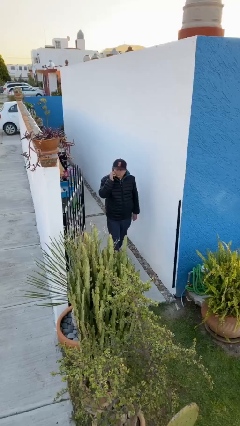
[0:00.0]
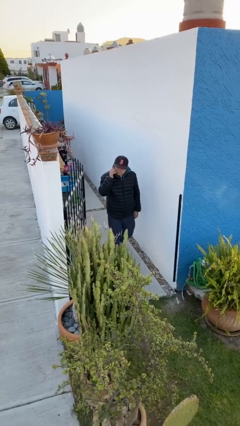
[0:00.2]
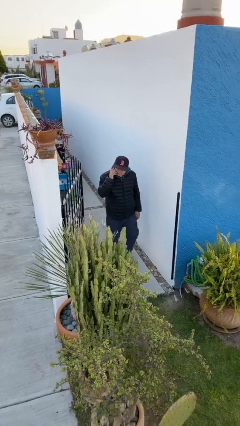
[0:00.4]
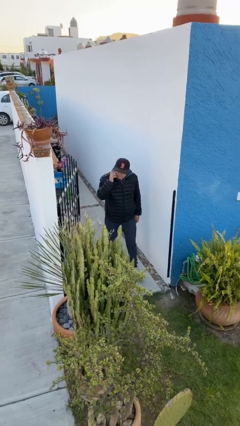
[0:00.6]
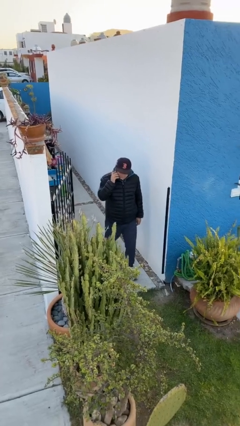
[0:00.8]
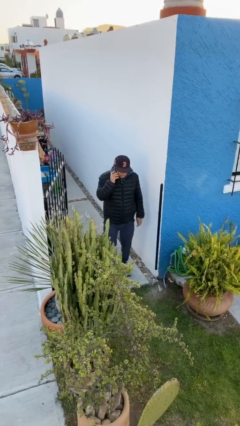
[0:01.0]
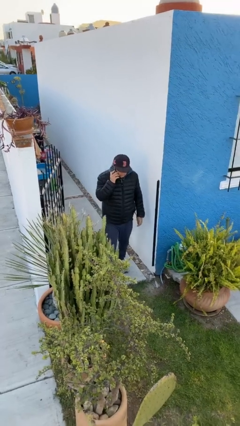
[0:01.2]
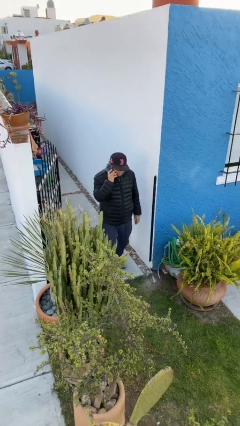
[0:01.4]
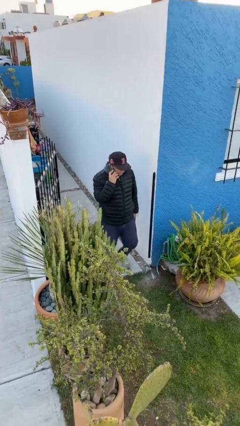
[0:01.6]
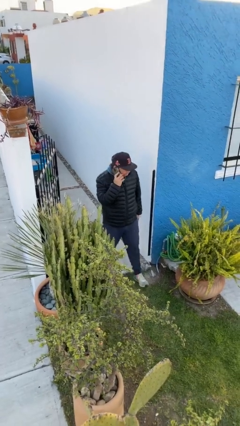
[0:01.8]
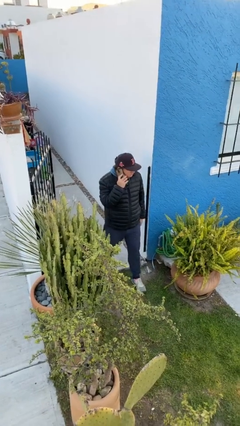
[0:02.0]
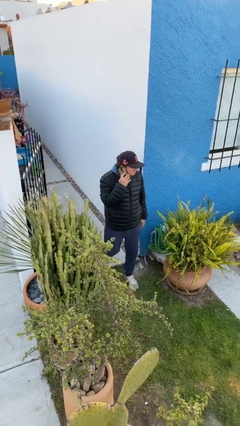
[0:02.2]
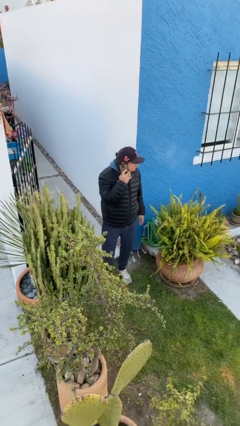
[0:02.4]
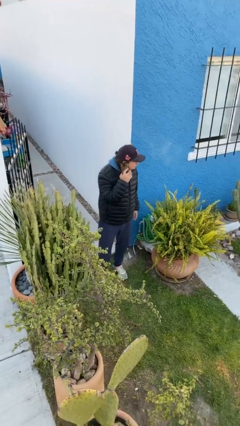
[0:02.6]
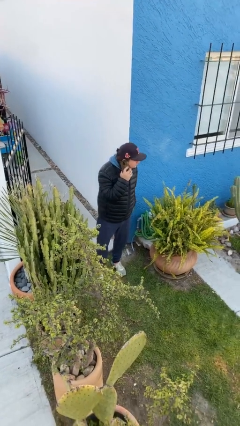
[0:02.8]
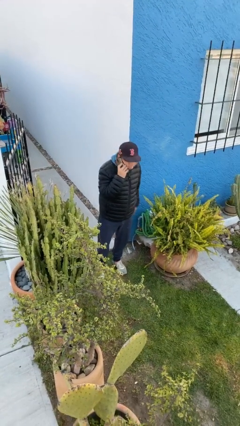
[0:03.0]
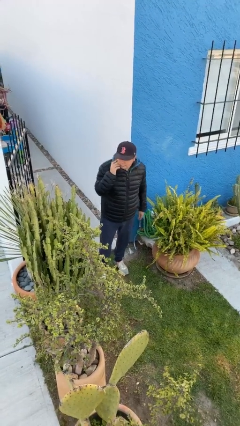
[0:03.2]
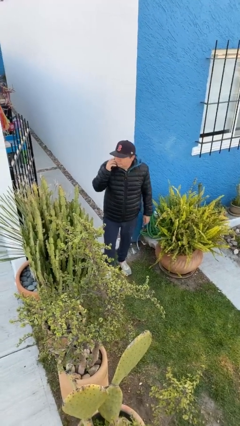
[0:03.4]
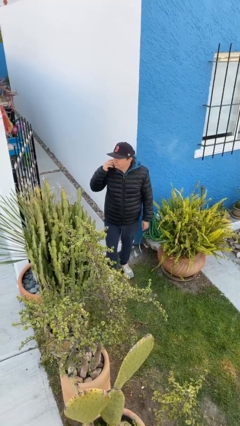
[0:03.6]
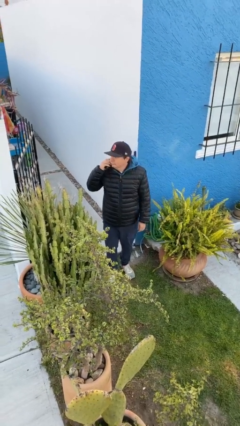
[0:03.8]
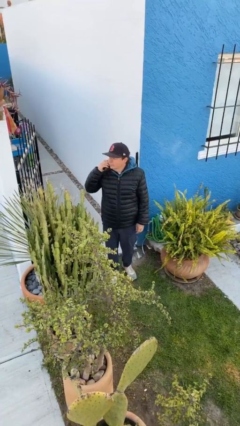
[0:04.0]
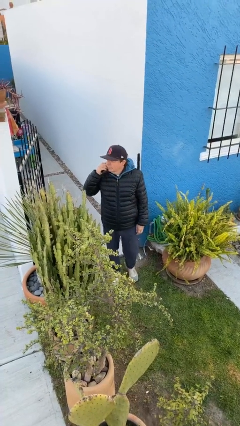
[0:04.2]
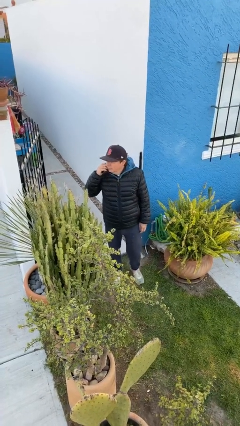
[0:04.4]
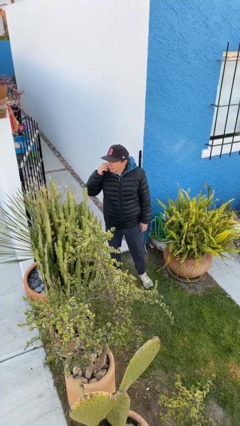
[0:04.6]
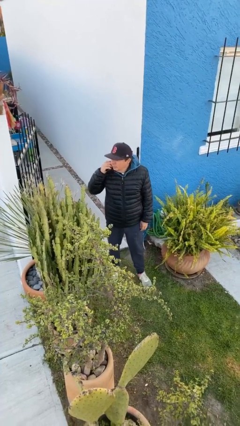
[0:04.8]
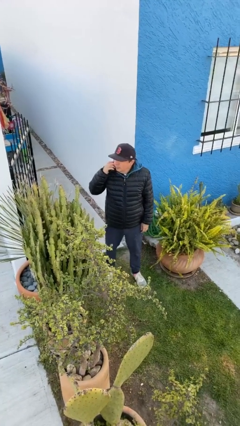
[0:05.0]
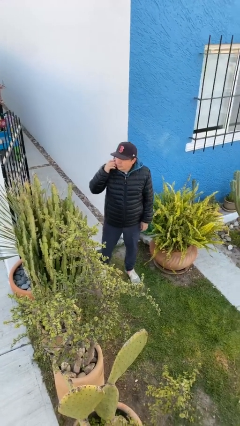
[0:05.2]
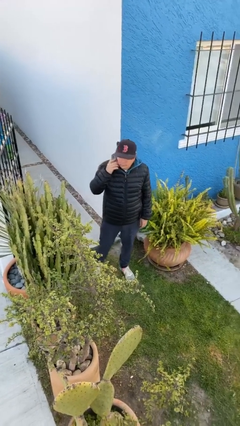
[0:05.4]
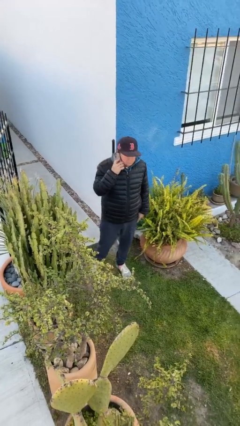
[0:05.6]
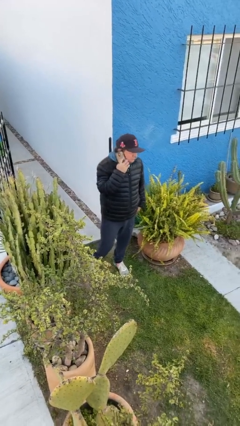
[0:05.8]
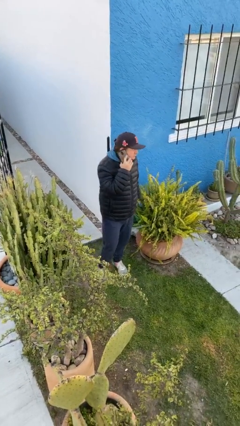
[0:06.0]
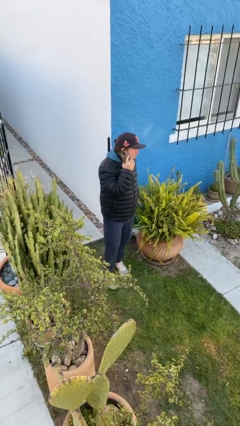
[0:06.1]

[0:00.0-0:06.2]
person enters scene through structure

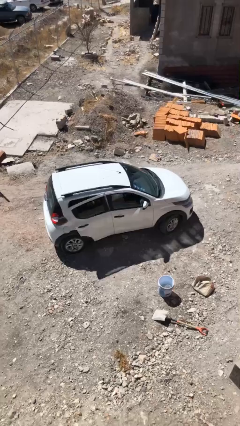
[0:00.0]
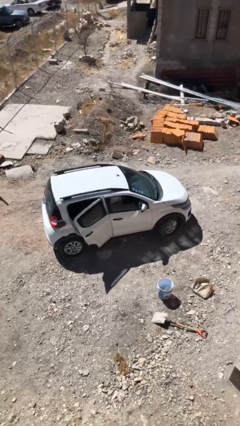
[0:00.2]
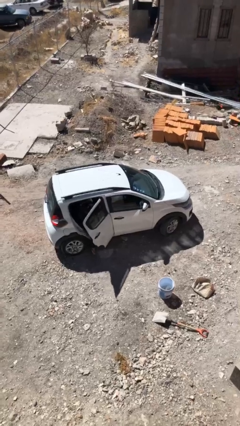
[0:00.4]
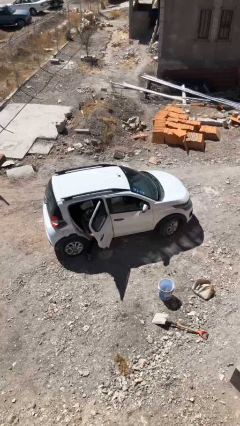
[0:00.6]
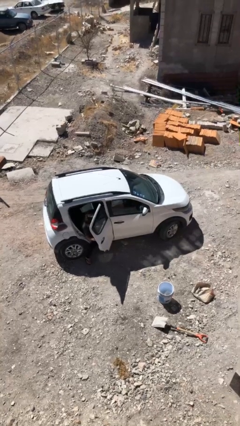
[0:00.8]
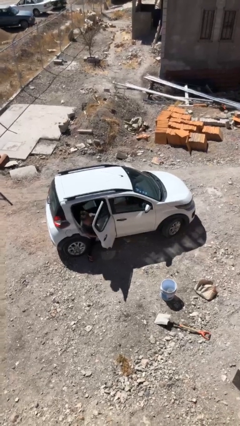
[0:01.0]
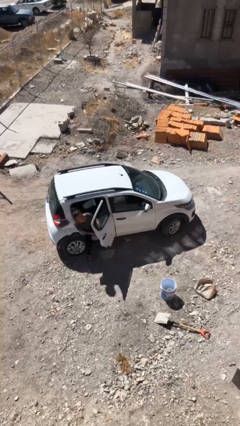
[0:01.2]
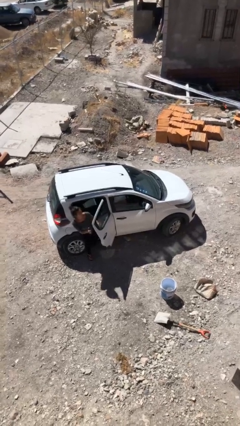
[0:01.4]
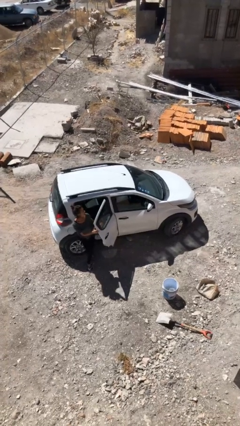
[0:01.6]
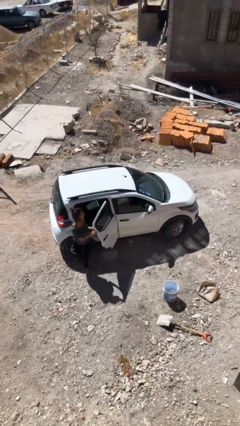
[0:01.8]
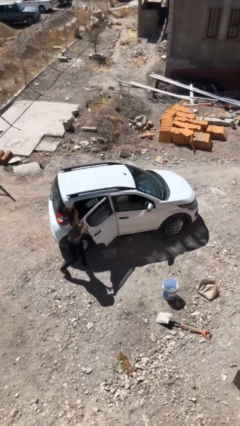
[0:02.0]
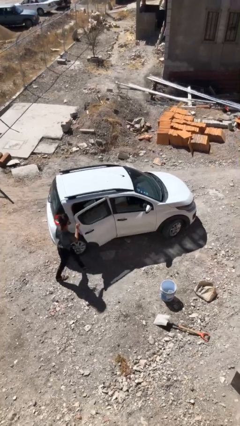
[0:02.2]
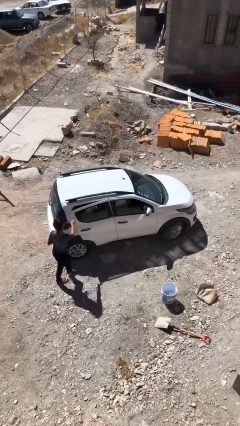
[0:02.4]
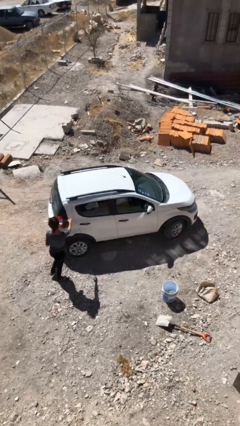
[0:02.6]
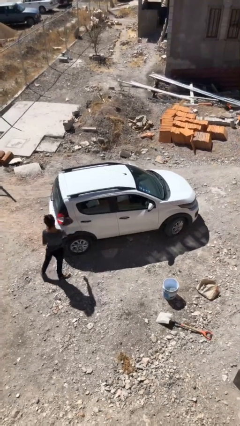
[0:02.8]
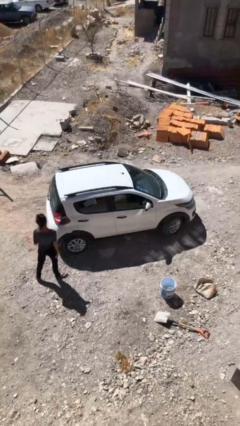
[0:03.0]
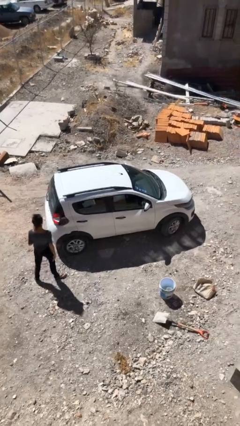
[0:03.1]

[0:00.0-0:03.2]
car drops off person

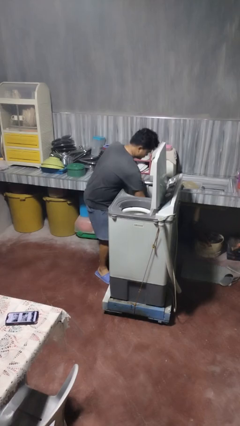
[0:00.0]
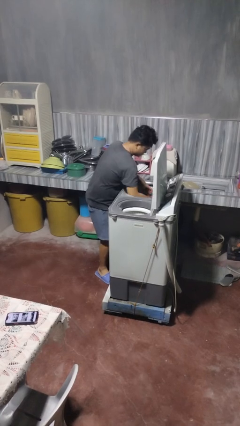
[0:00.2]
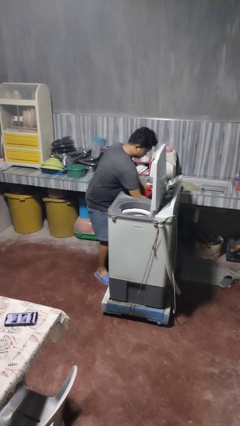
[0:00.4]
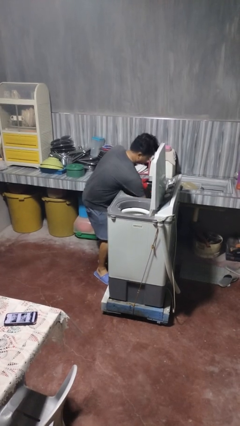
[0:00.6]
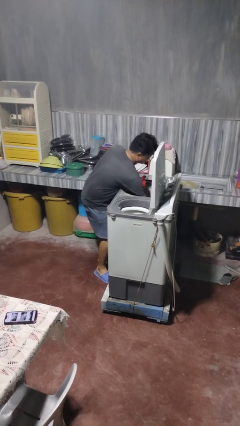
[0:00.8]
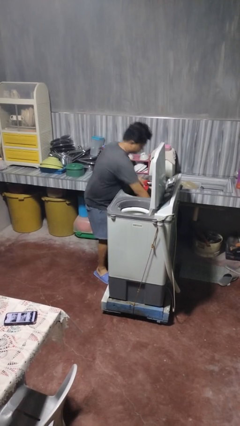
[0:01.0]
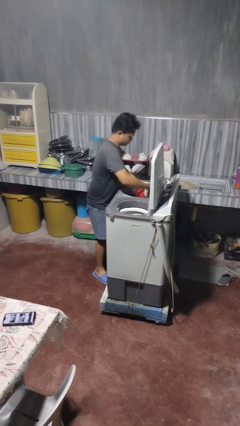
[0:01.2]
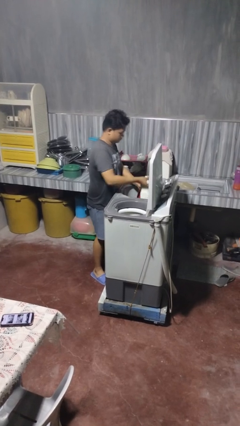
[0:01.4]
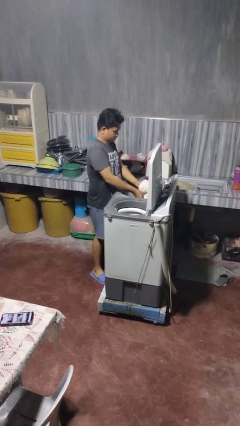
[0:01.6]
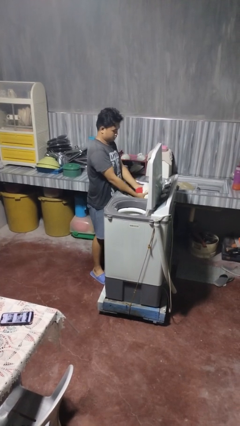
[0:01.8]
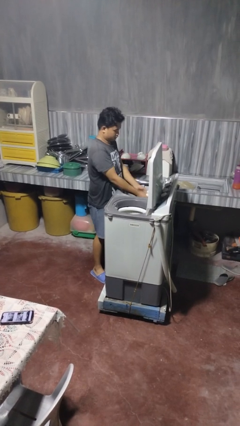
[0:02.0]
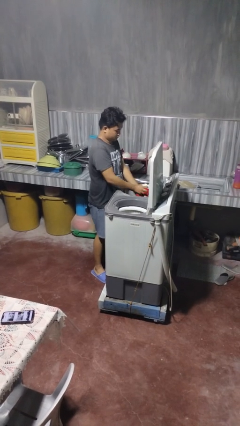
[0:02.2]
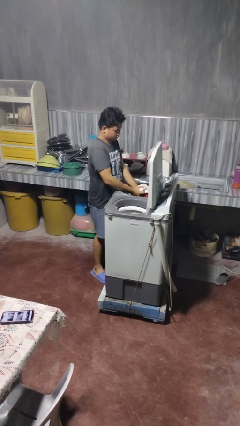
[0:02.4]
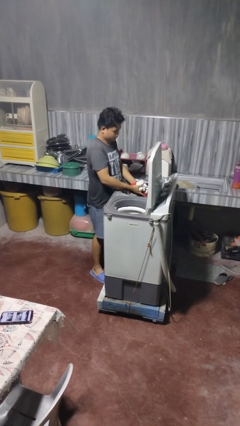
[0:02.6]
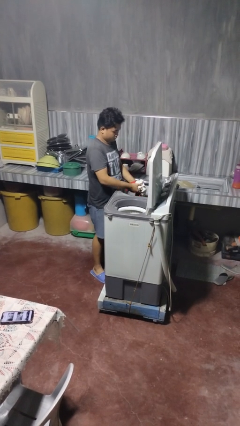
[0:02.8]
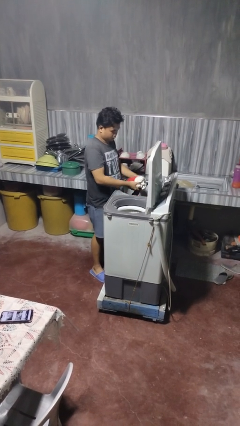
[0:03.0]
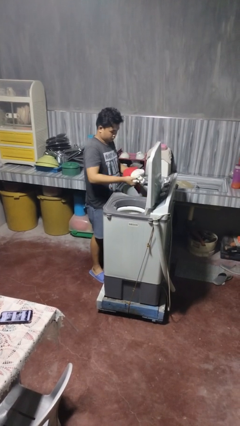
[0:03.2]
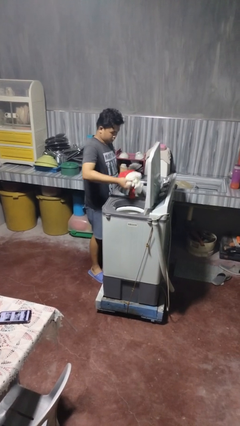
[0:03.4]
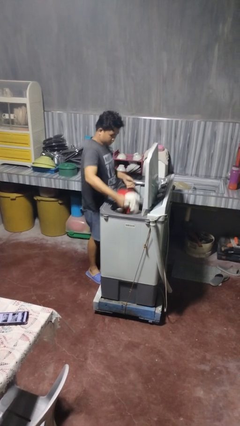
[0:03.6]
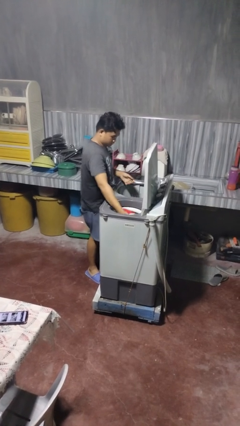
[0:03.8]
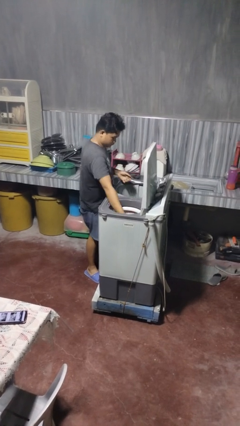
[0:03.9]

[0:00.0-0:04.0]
person unloads clotheswasher

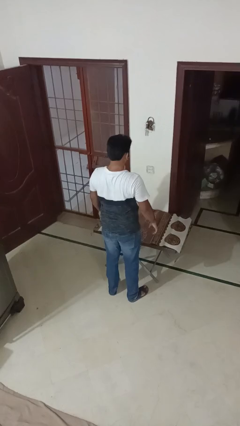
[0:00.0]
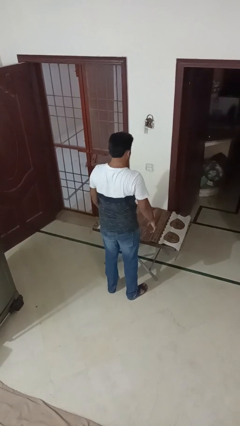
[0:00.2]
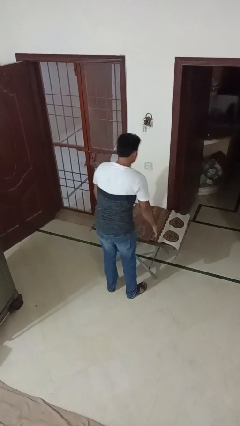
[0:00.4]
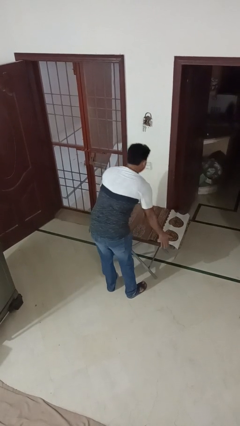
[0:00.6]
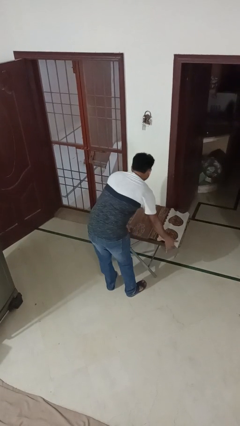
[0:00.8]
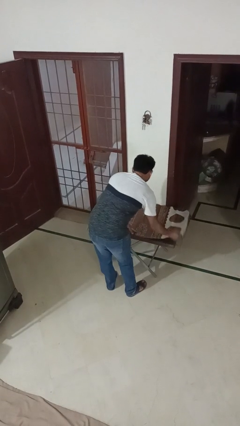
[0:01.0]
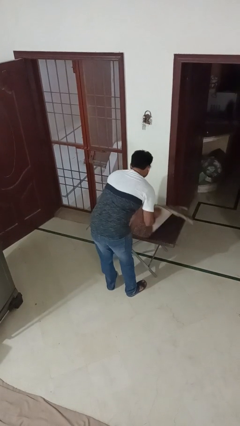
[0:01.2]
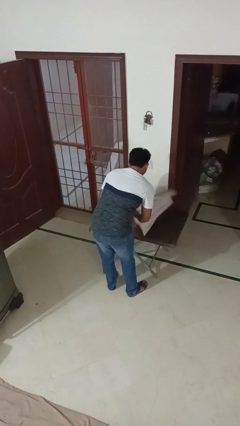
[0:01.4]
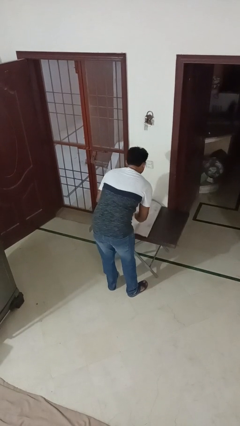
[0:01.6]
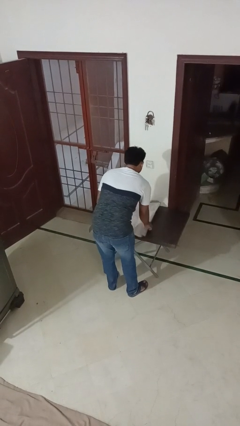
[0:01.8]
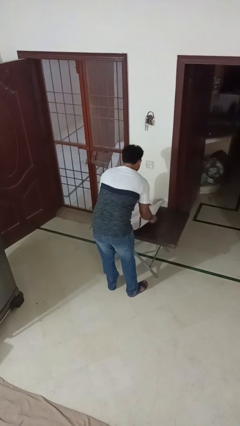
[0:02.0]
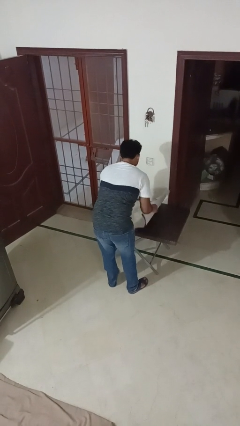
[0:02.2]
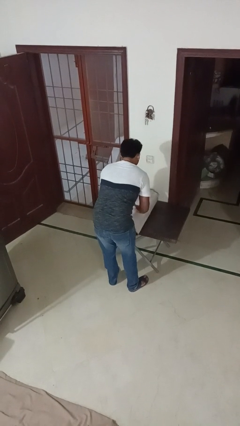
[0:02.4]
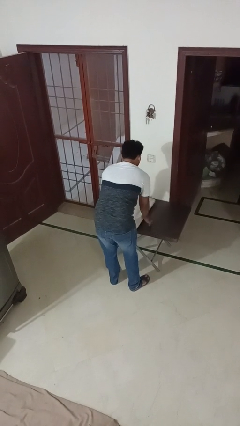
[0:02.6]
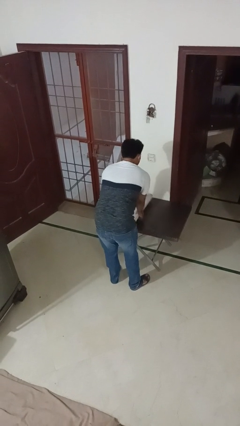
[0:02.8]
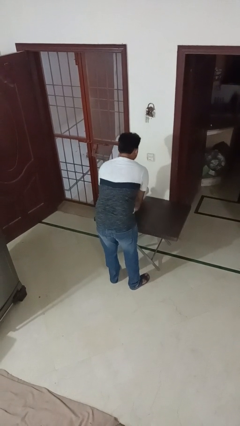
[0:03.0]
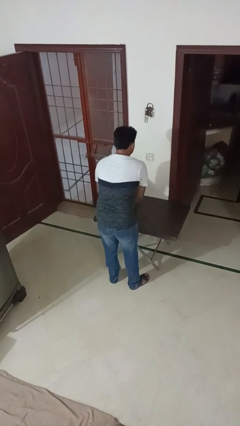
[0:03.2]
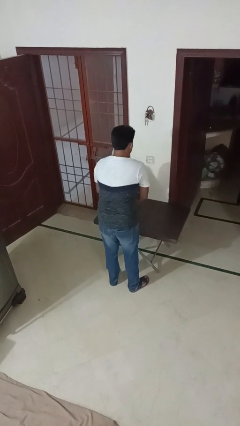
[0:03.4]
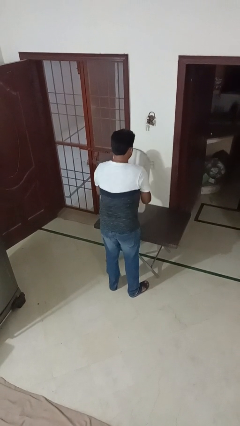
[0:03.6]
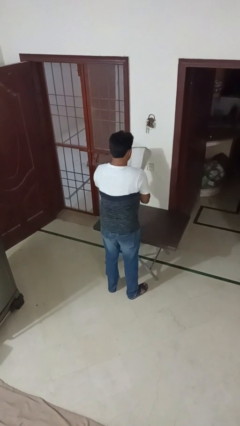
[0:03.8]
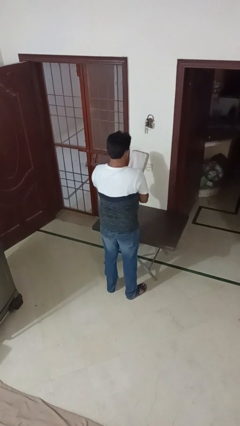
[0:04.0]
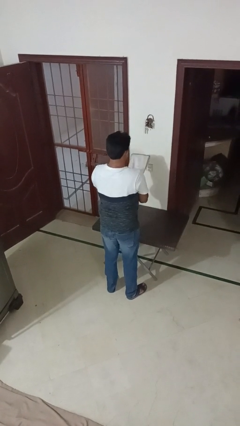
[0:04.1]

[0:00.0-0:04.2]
person folds tablecloth
